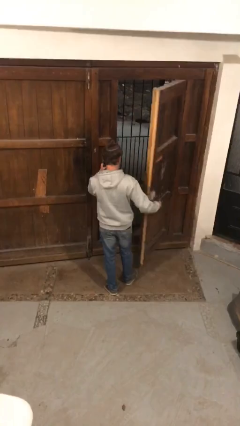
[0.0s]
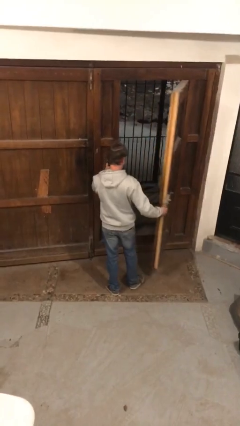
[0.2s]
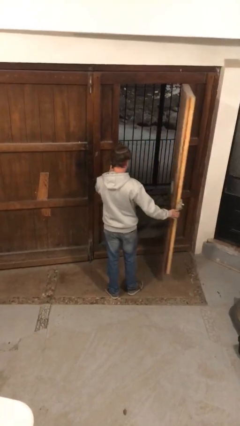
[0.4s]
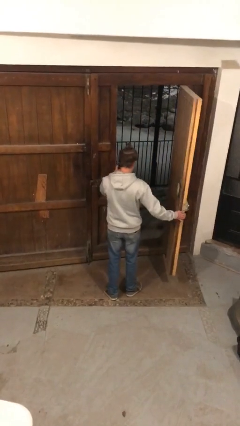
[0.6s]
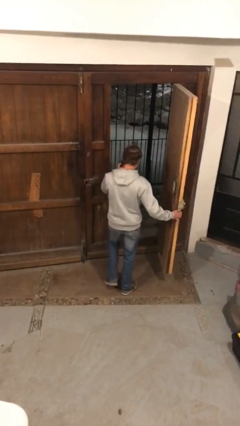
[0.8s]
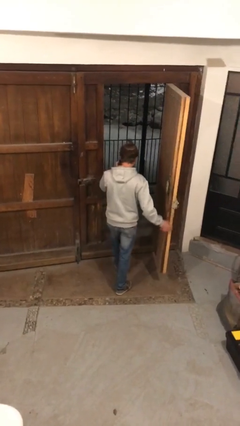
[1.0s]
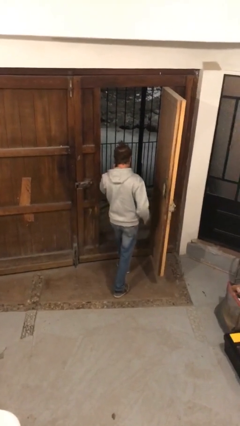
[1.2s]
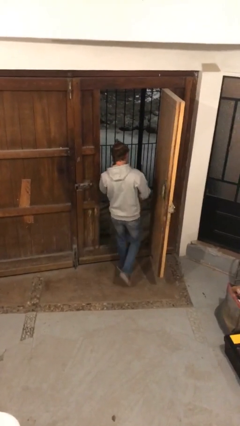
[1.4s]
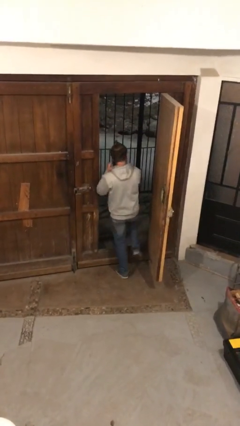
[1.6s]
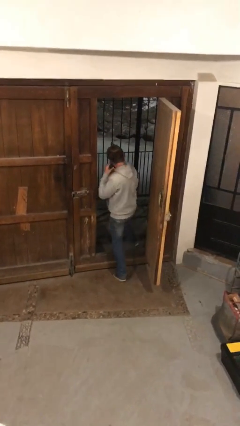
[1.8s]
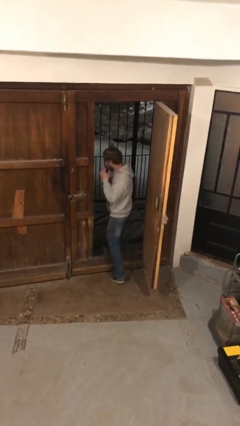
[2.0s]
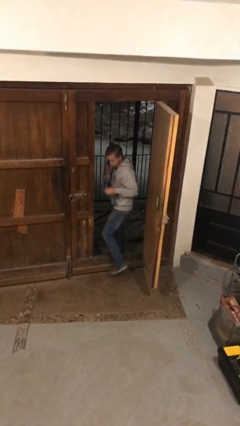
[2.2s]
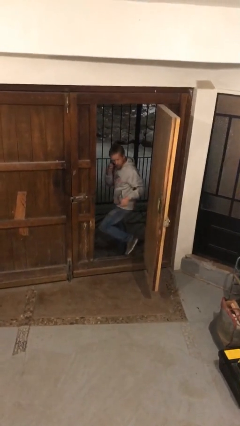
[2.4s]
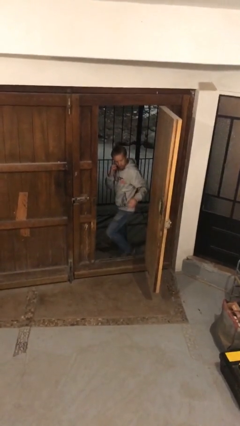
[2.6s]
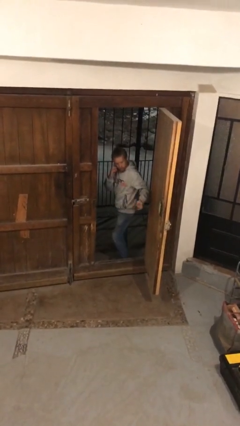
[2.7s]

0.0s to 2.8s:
person exits scene through structure

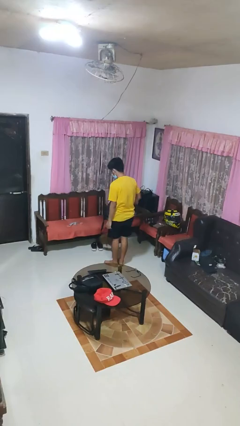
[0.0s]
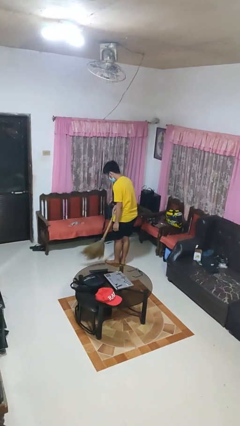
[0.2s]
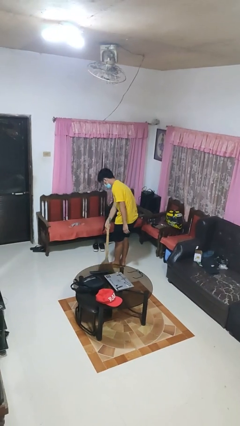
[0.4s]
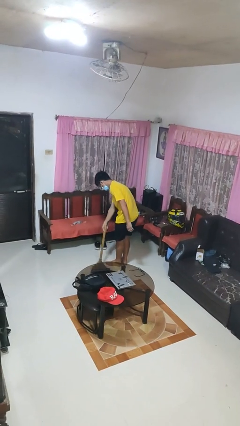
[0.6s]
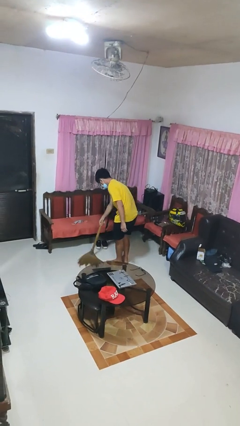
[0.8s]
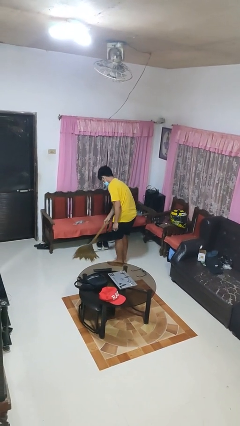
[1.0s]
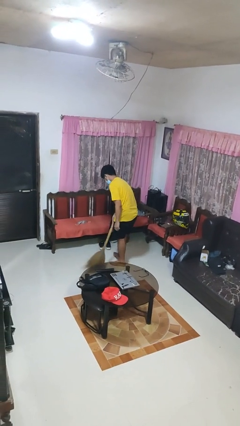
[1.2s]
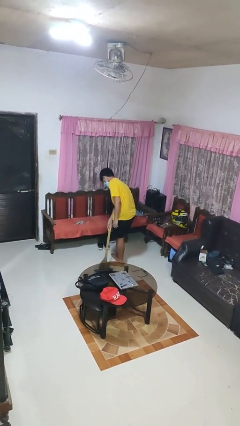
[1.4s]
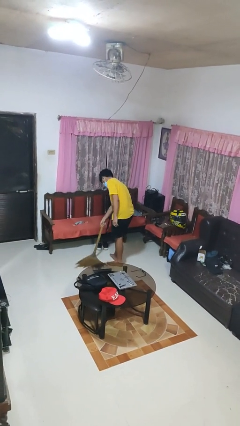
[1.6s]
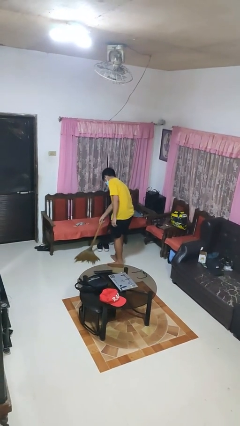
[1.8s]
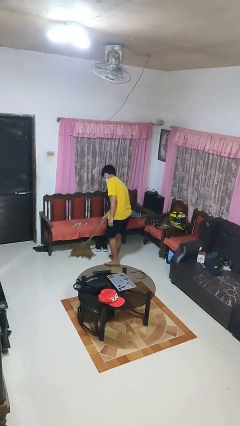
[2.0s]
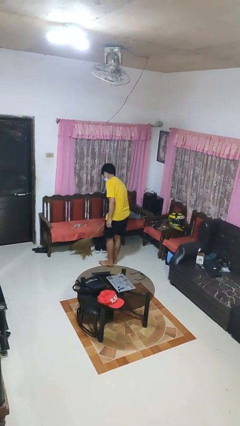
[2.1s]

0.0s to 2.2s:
person sweeps floor

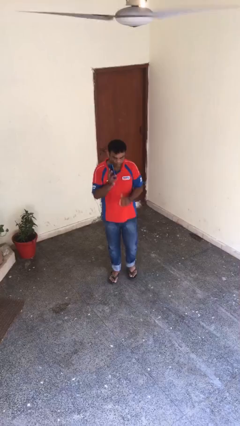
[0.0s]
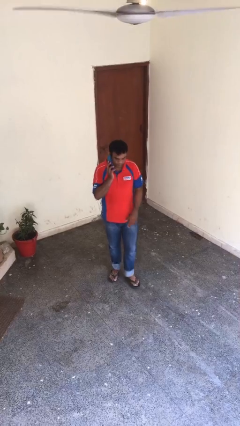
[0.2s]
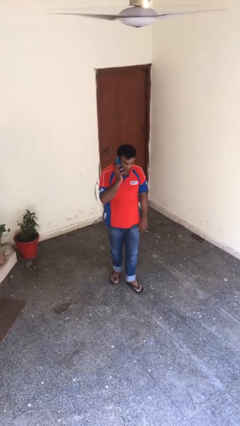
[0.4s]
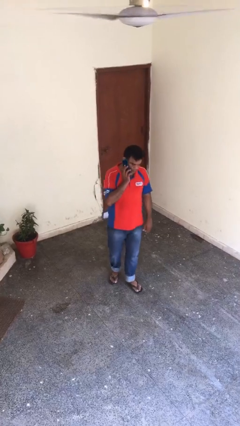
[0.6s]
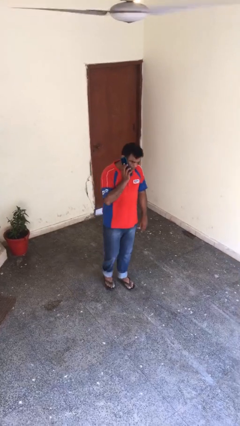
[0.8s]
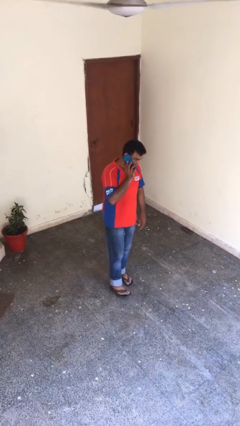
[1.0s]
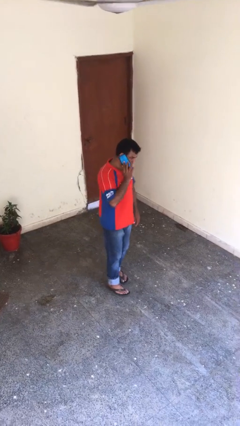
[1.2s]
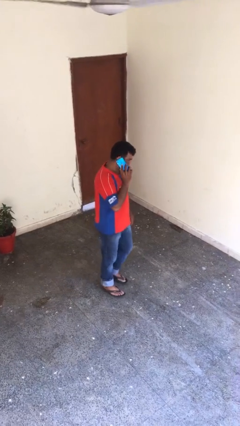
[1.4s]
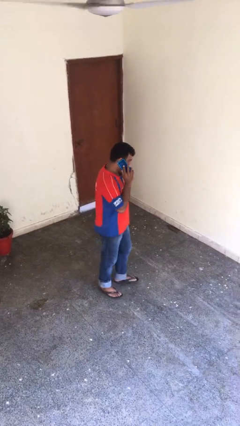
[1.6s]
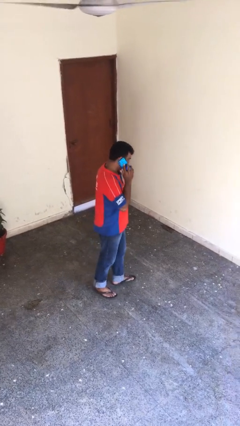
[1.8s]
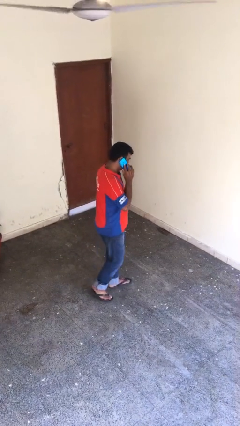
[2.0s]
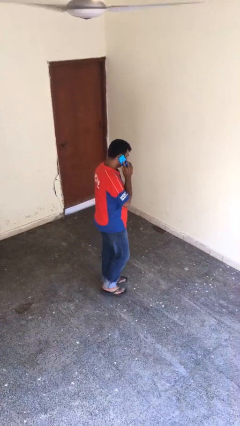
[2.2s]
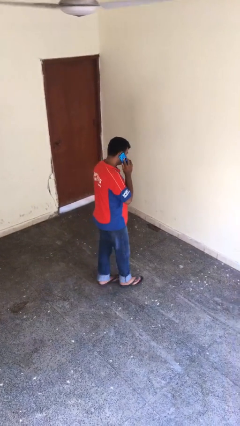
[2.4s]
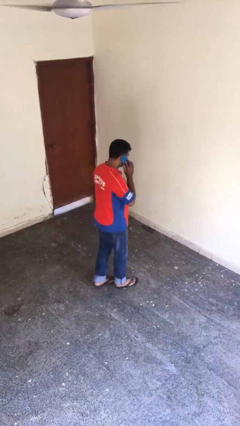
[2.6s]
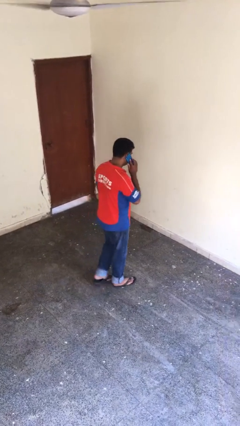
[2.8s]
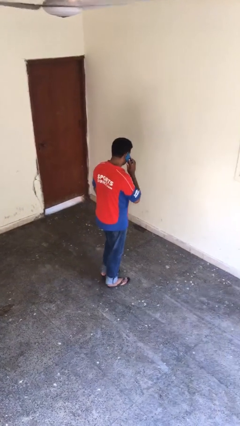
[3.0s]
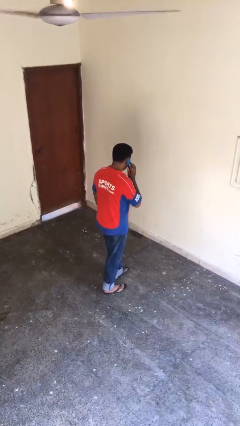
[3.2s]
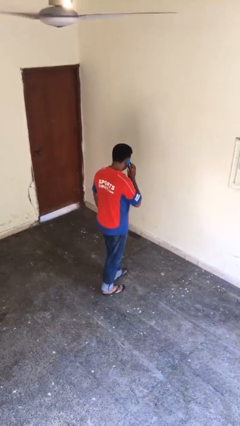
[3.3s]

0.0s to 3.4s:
person talks on phone

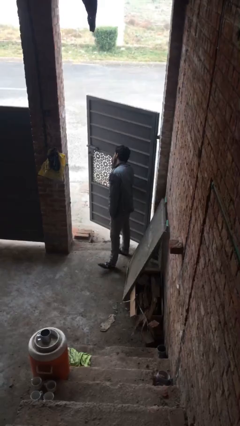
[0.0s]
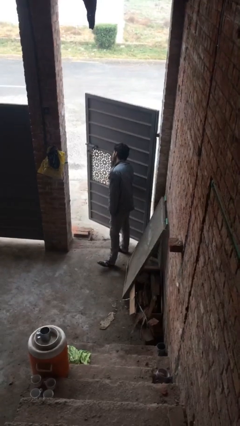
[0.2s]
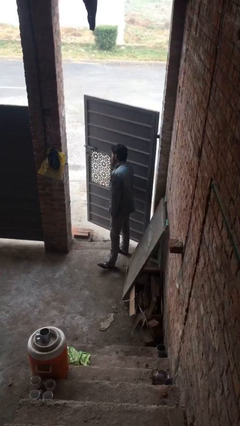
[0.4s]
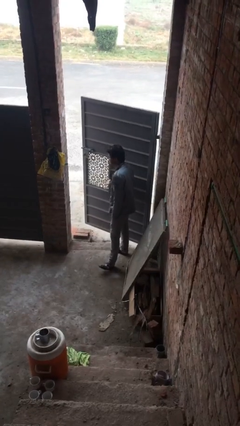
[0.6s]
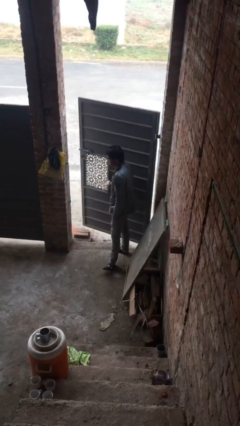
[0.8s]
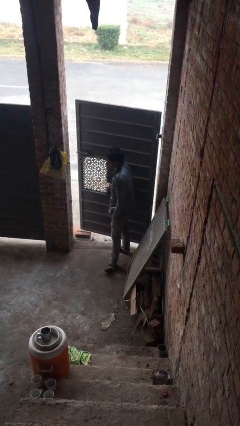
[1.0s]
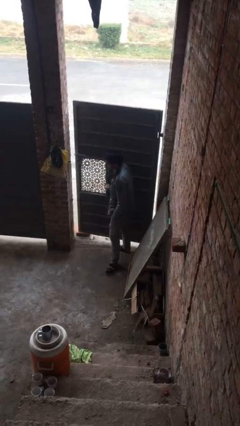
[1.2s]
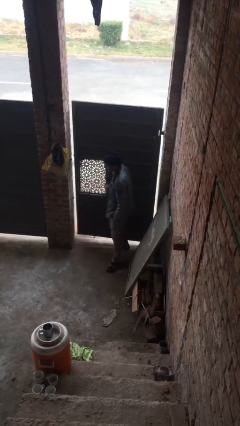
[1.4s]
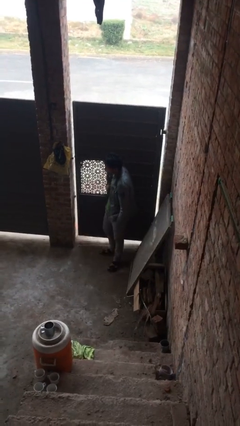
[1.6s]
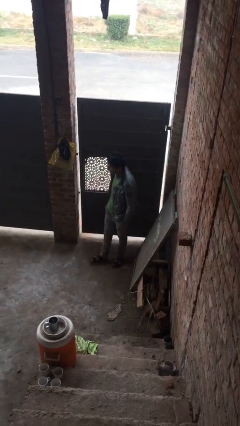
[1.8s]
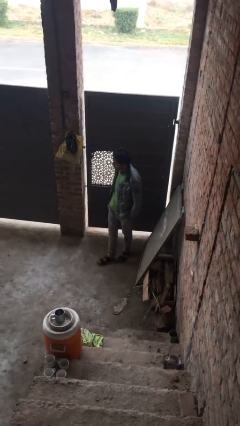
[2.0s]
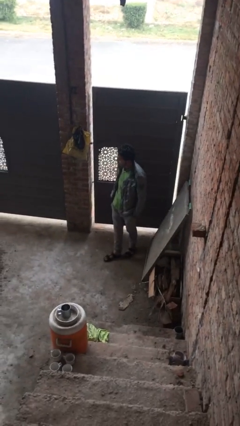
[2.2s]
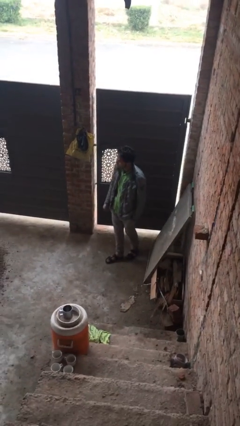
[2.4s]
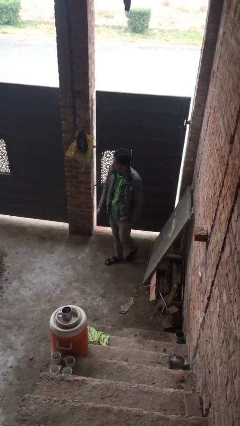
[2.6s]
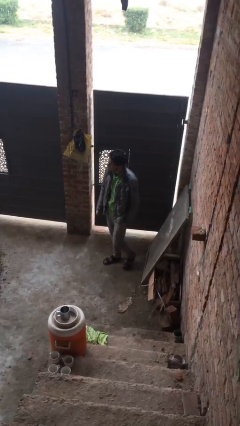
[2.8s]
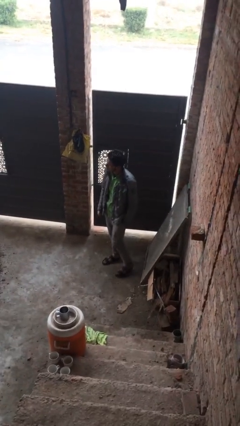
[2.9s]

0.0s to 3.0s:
person closes facility door

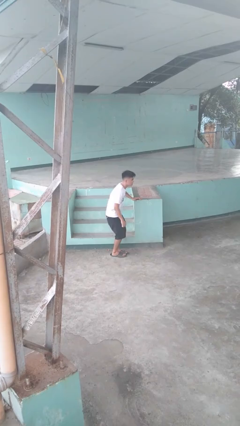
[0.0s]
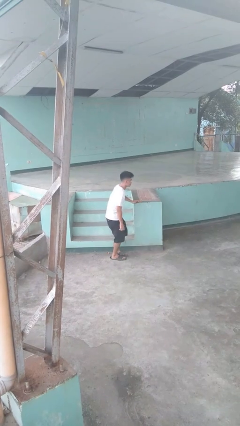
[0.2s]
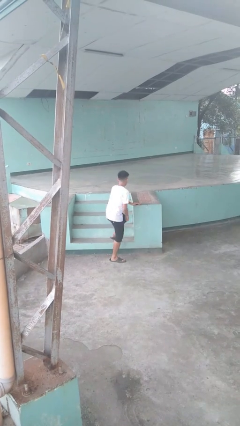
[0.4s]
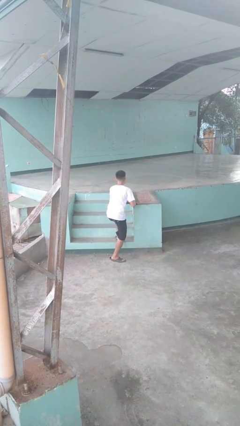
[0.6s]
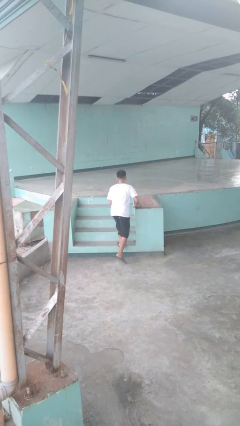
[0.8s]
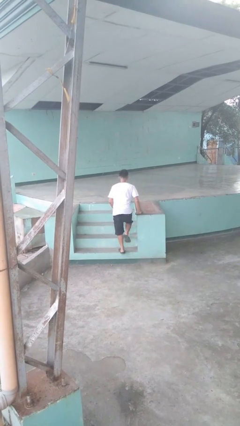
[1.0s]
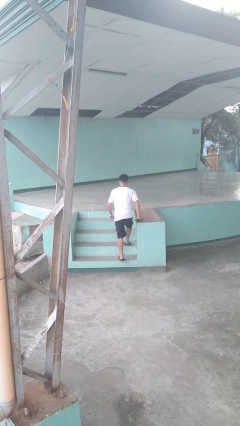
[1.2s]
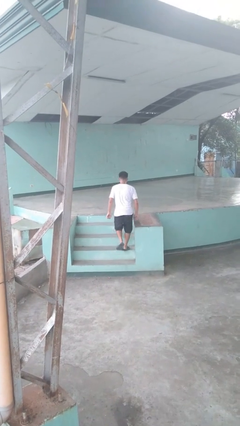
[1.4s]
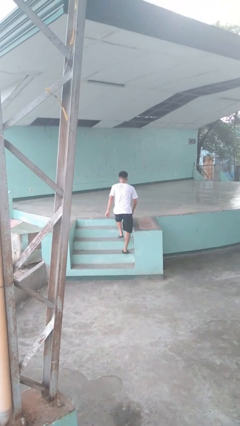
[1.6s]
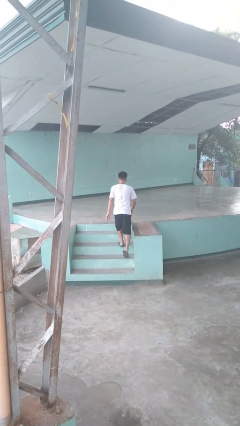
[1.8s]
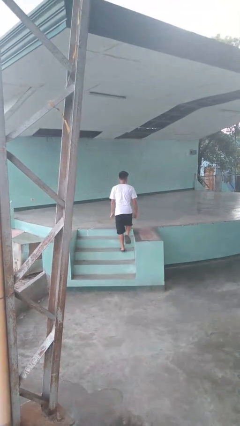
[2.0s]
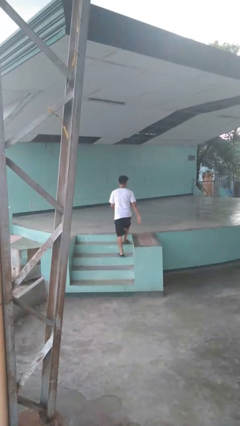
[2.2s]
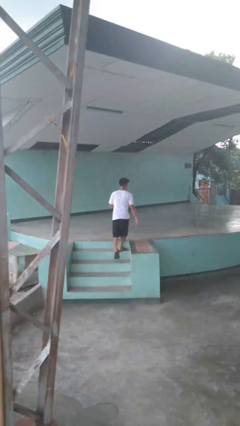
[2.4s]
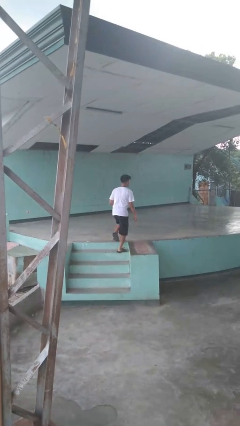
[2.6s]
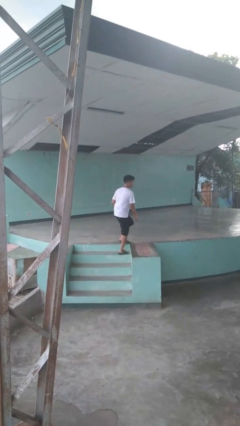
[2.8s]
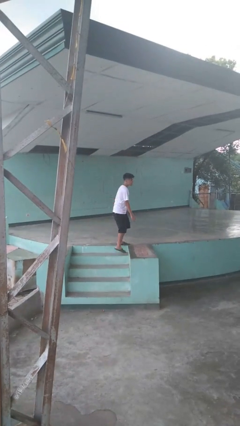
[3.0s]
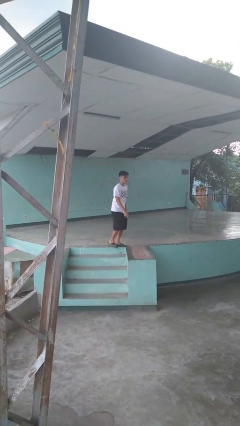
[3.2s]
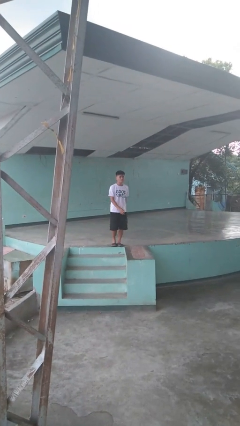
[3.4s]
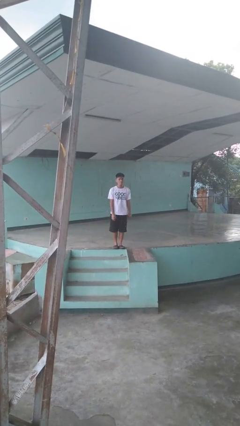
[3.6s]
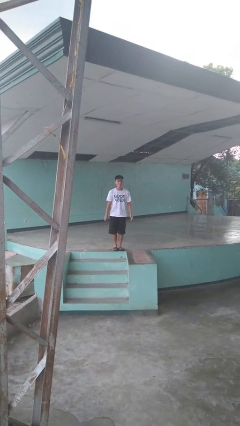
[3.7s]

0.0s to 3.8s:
person climbs up stairs

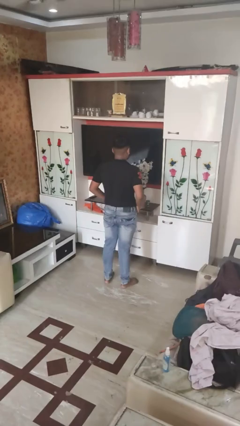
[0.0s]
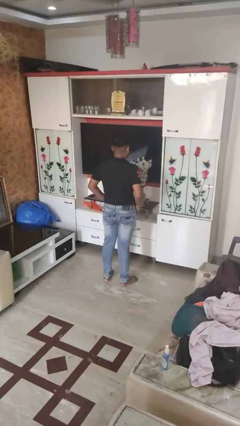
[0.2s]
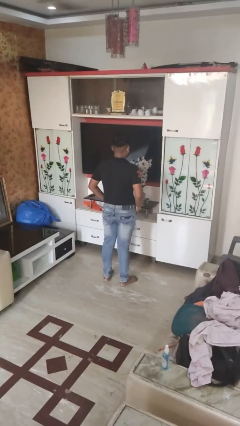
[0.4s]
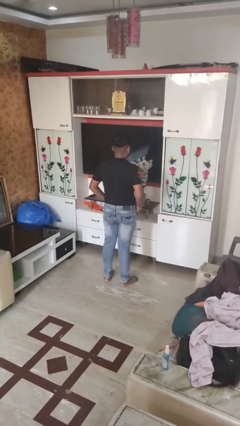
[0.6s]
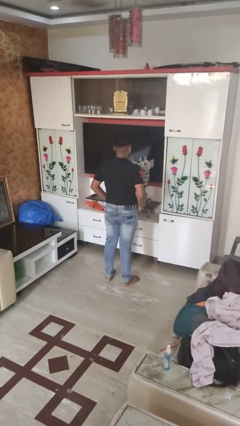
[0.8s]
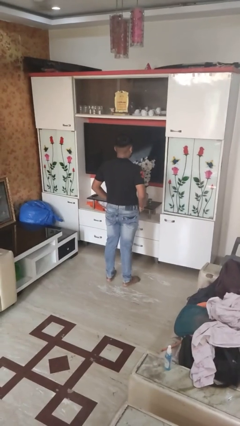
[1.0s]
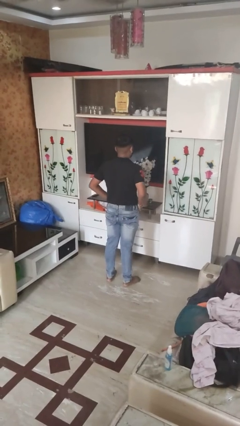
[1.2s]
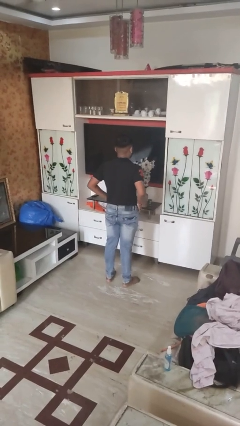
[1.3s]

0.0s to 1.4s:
person puts hands in back pockets

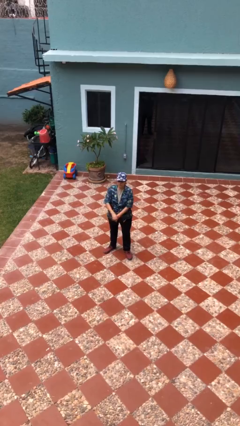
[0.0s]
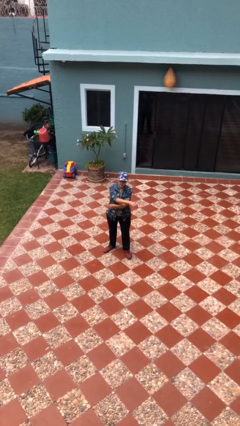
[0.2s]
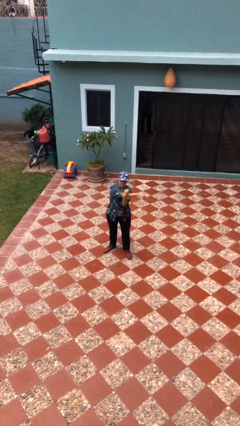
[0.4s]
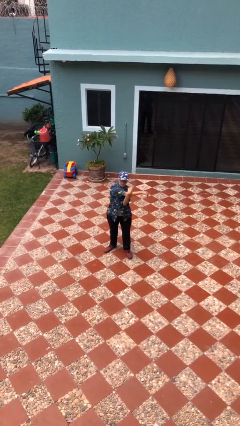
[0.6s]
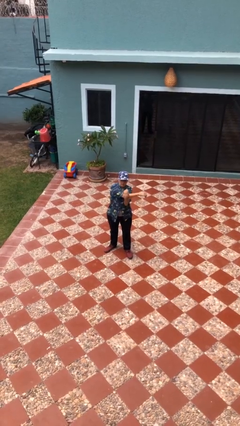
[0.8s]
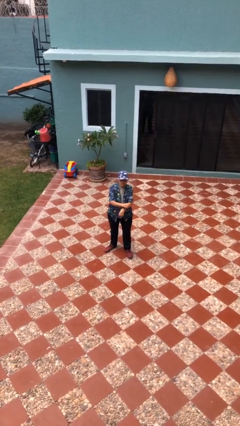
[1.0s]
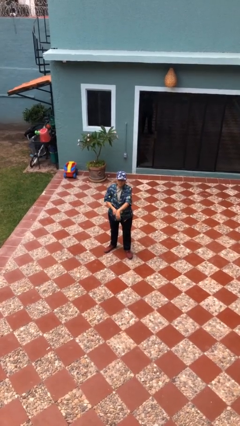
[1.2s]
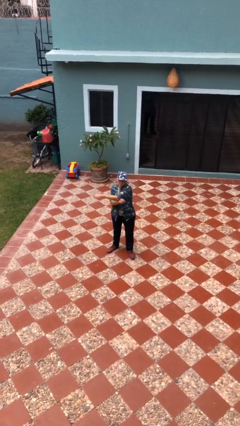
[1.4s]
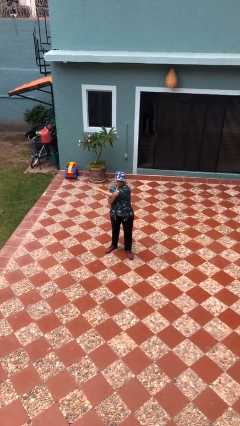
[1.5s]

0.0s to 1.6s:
person stretches arms to side
